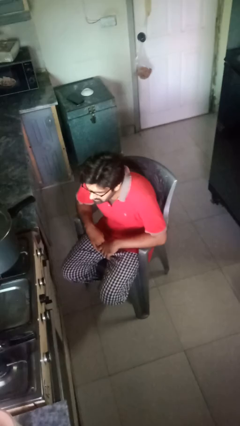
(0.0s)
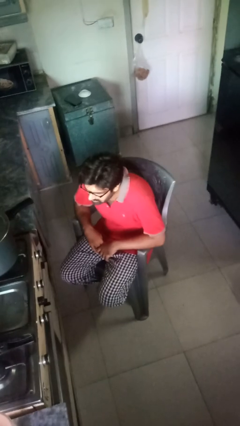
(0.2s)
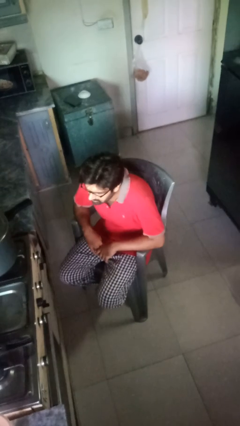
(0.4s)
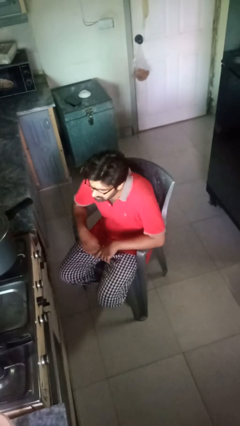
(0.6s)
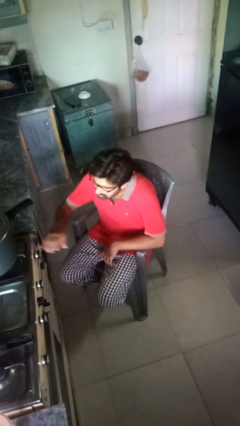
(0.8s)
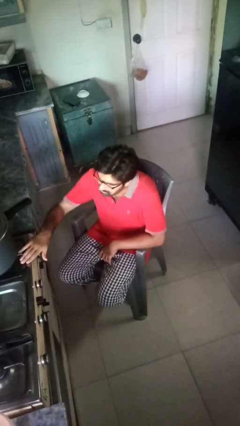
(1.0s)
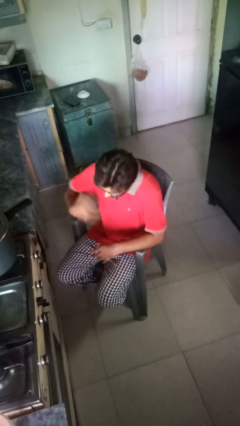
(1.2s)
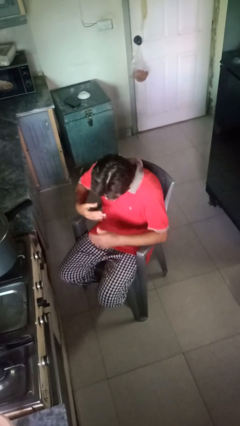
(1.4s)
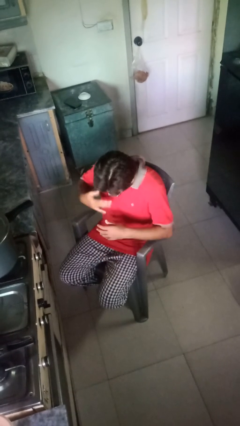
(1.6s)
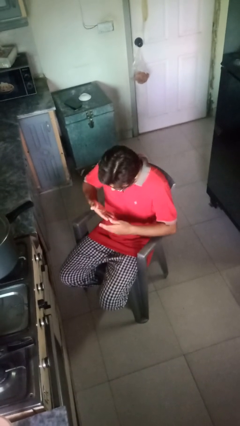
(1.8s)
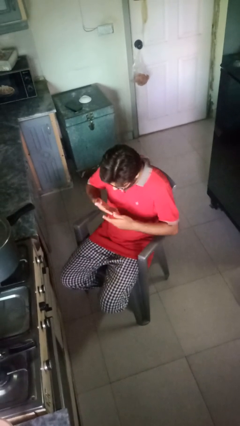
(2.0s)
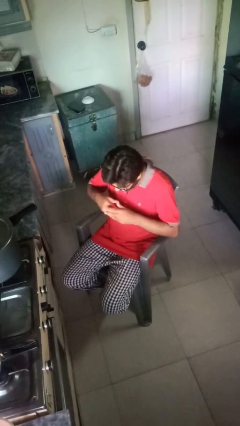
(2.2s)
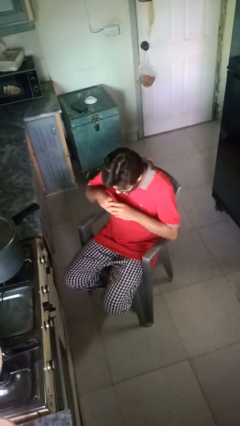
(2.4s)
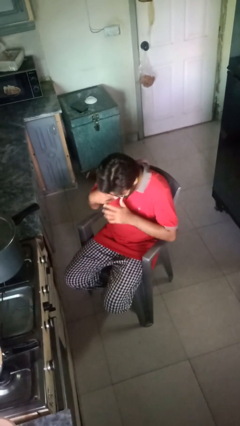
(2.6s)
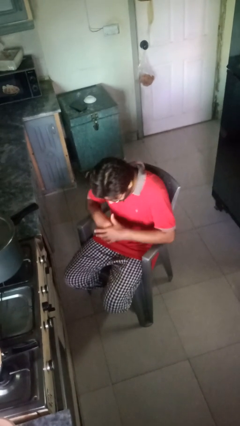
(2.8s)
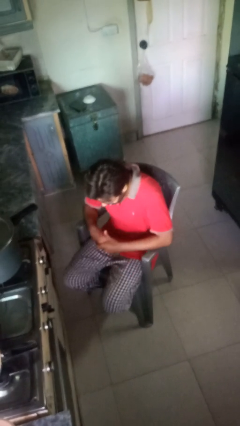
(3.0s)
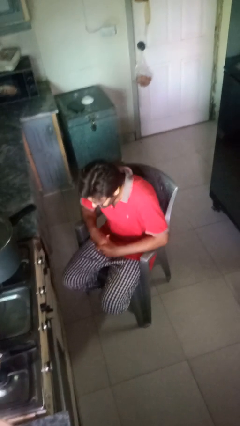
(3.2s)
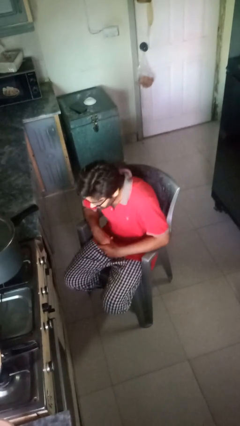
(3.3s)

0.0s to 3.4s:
person burns hand

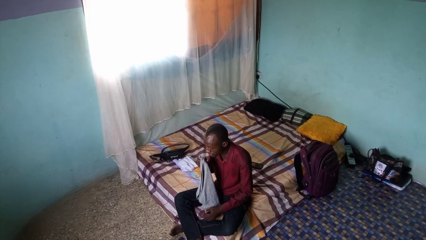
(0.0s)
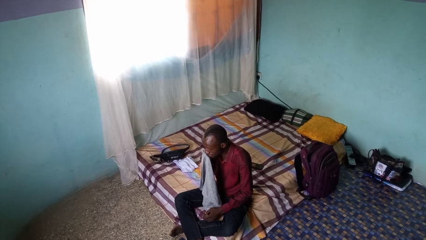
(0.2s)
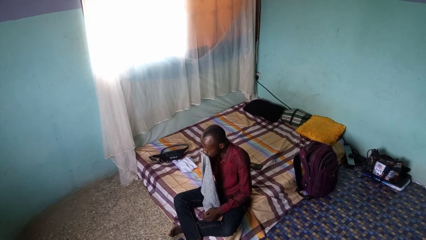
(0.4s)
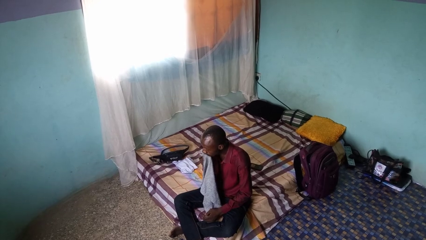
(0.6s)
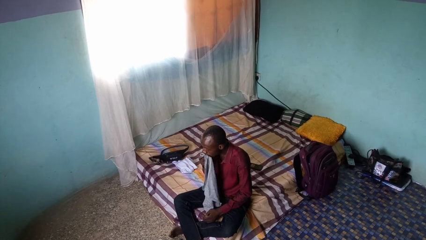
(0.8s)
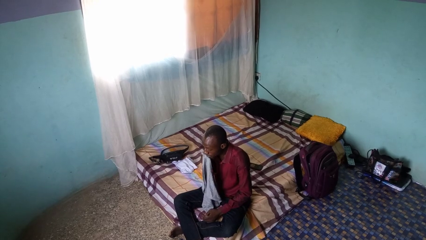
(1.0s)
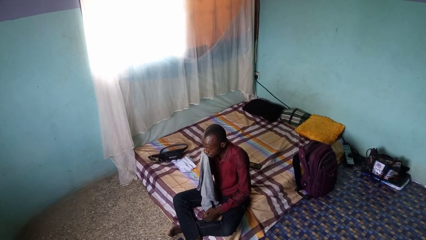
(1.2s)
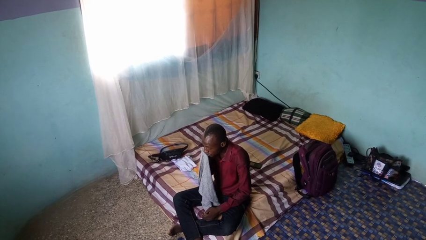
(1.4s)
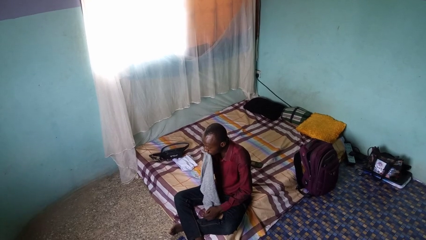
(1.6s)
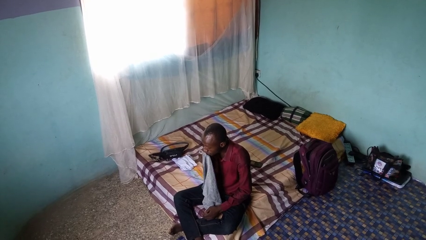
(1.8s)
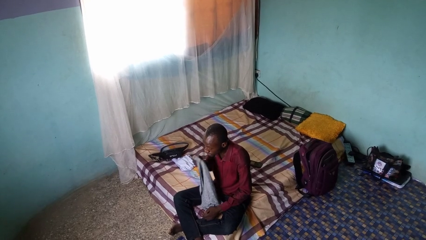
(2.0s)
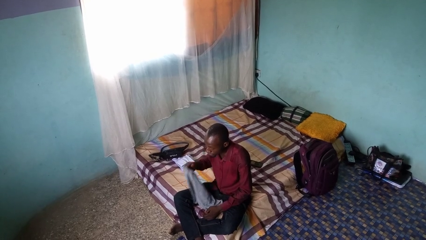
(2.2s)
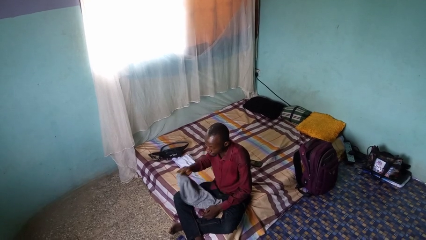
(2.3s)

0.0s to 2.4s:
person wipes mouth with napkin

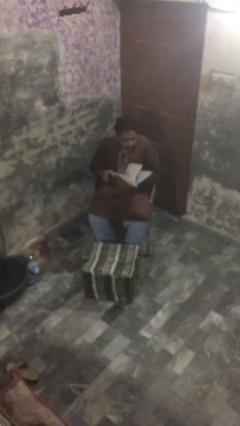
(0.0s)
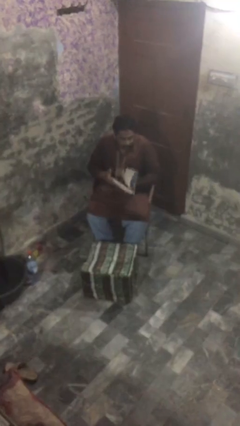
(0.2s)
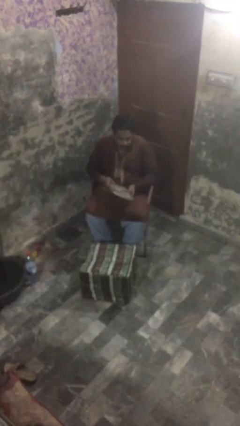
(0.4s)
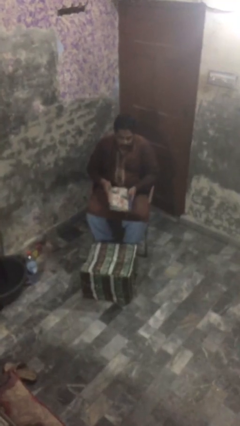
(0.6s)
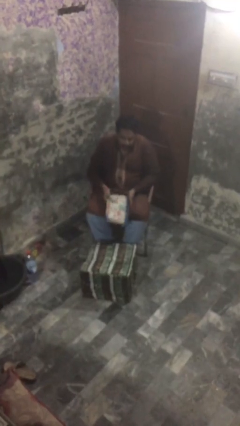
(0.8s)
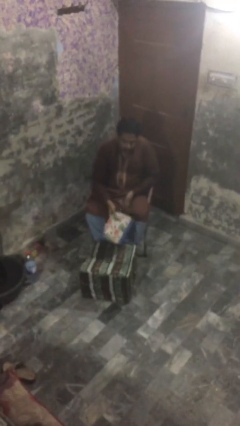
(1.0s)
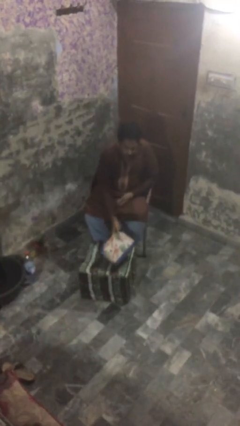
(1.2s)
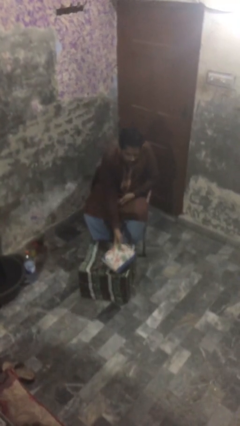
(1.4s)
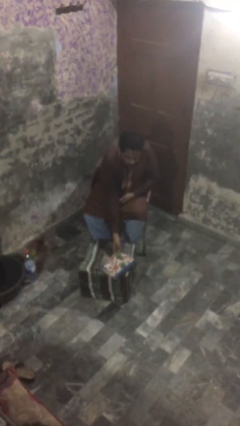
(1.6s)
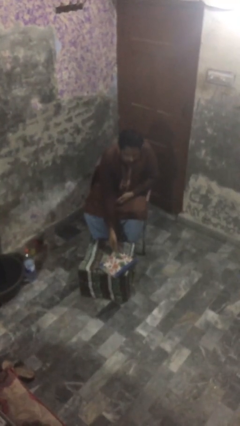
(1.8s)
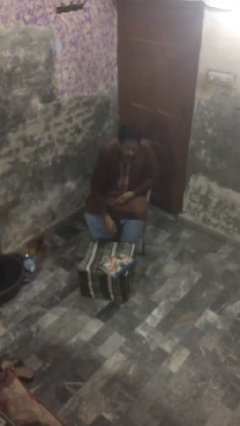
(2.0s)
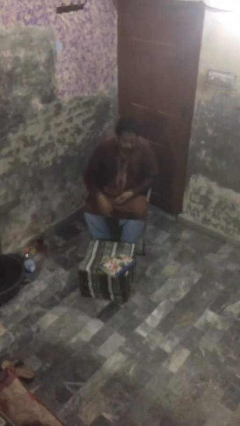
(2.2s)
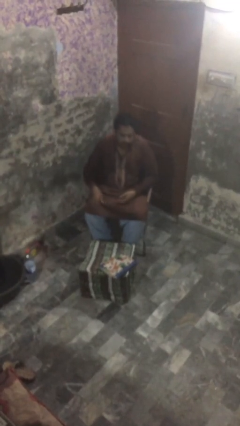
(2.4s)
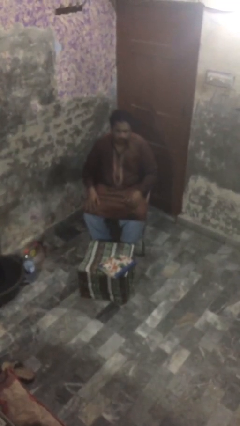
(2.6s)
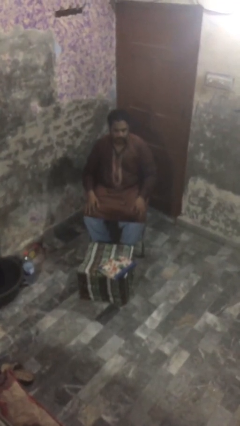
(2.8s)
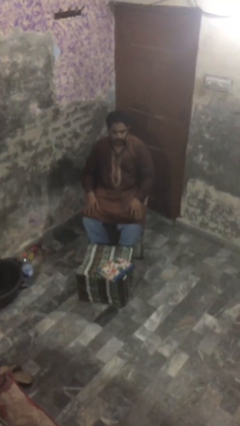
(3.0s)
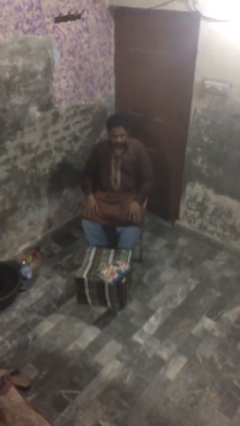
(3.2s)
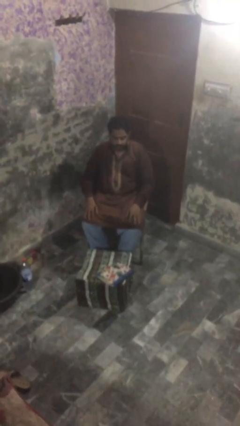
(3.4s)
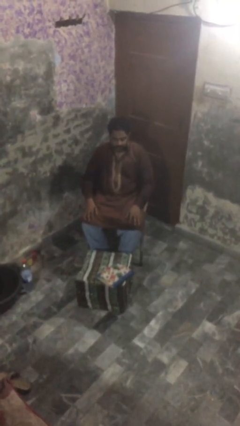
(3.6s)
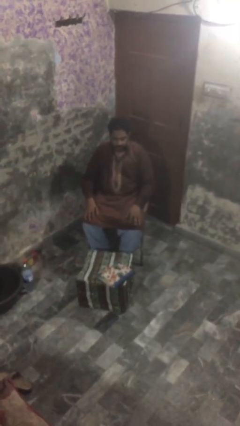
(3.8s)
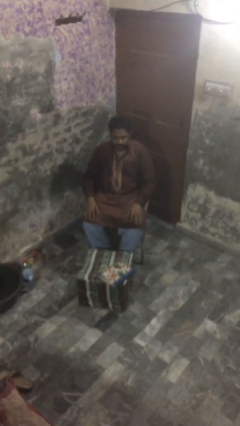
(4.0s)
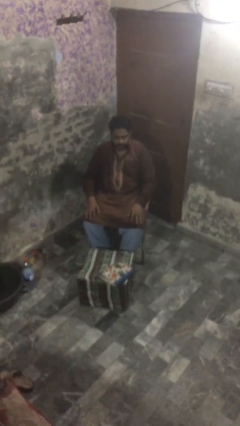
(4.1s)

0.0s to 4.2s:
person puts down object on table

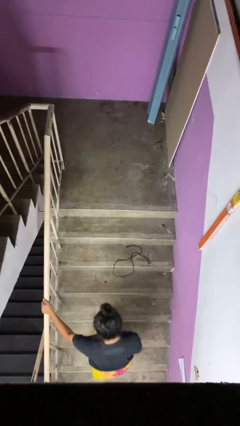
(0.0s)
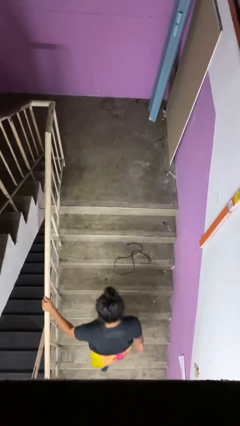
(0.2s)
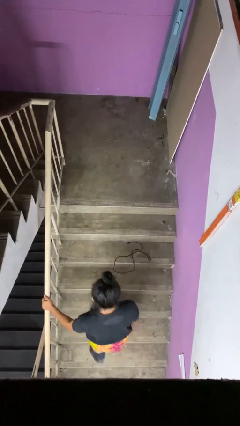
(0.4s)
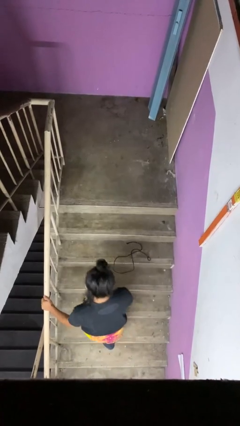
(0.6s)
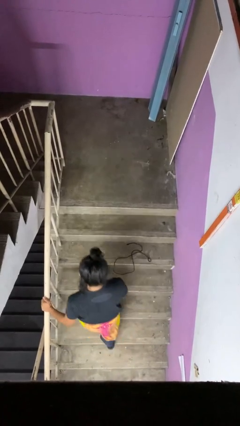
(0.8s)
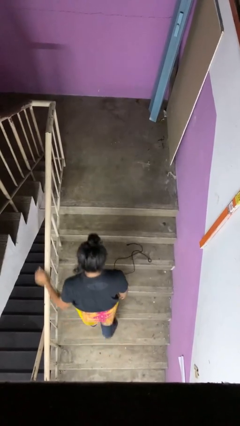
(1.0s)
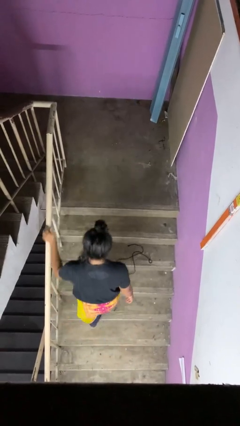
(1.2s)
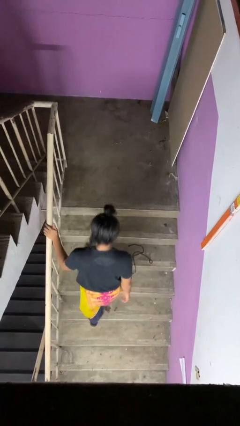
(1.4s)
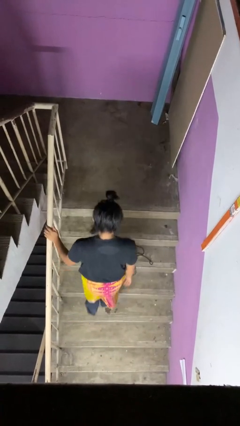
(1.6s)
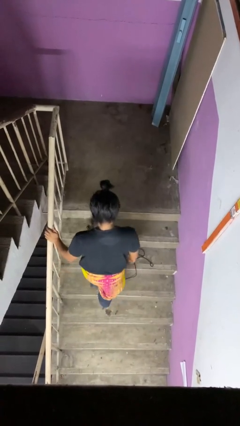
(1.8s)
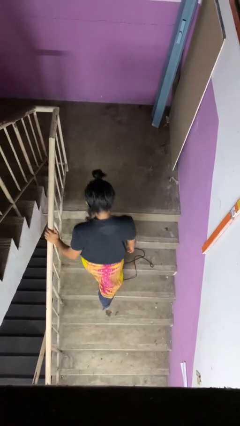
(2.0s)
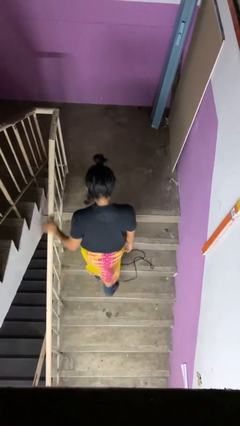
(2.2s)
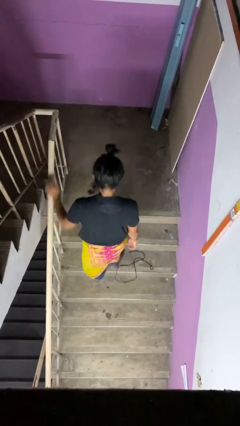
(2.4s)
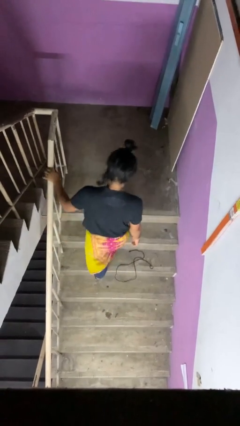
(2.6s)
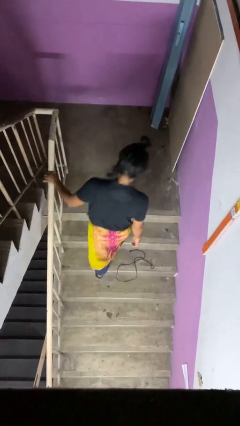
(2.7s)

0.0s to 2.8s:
person climbs up stairs

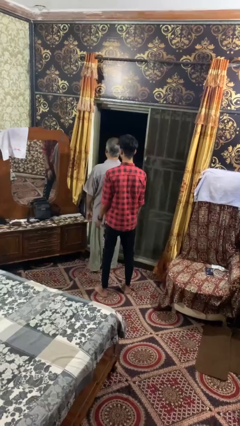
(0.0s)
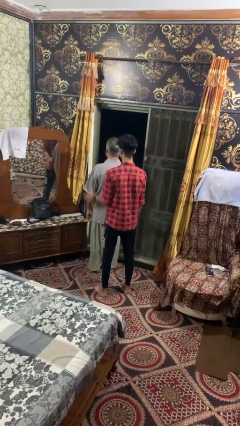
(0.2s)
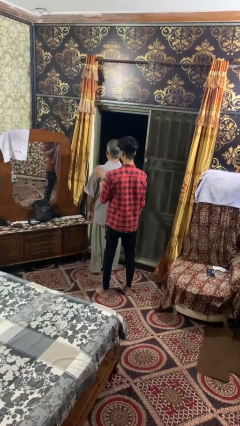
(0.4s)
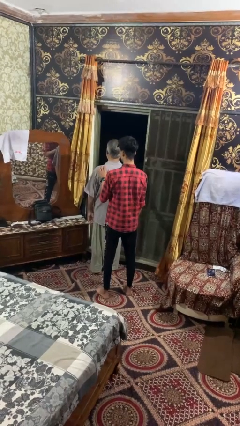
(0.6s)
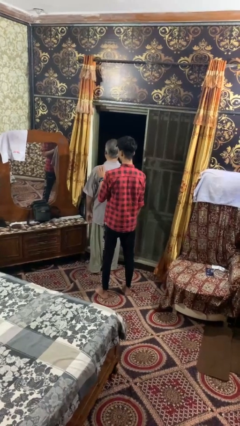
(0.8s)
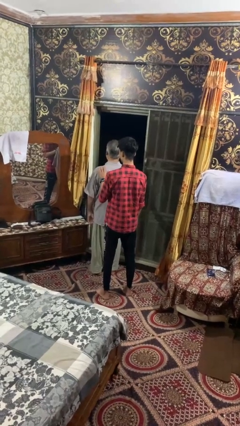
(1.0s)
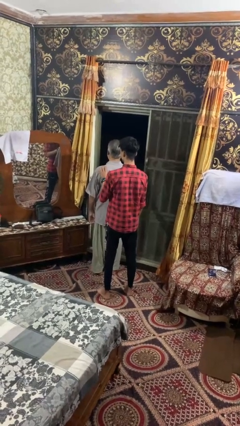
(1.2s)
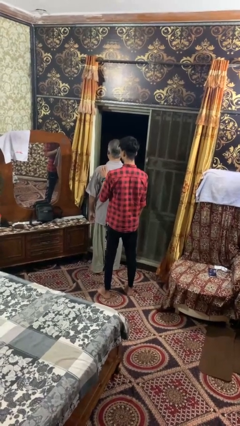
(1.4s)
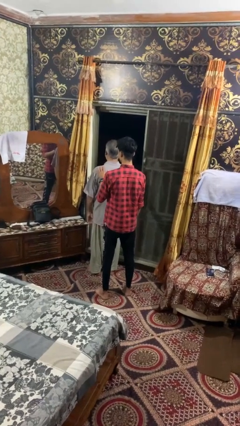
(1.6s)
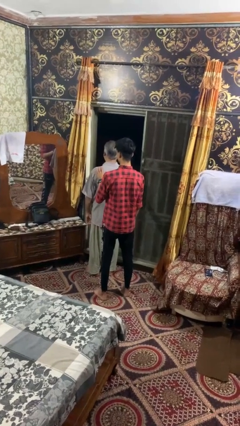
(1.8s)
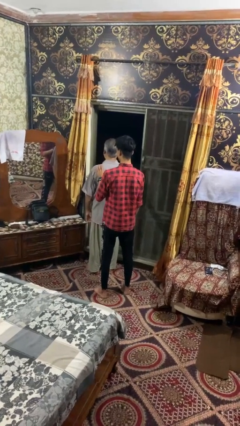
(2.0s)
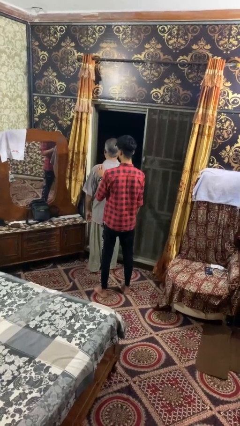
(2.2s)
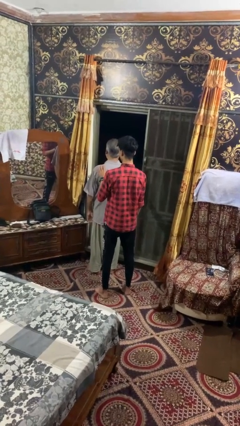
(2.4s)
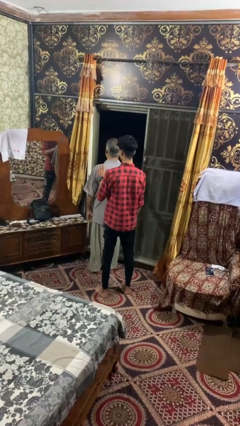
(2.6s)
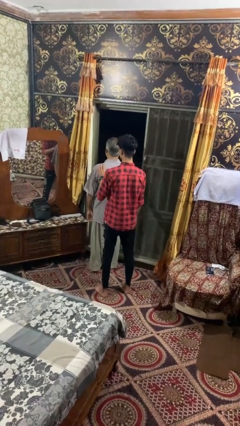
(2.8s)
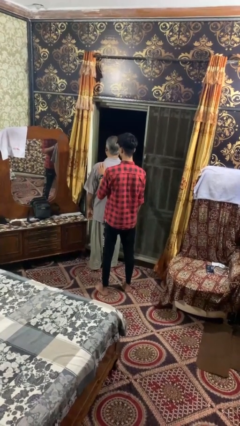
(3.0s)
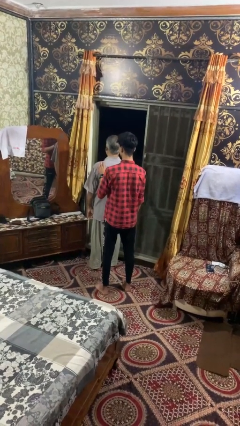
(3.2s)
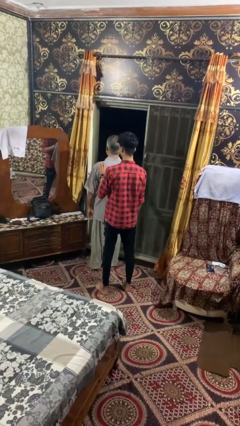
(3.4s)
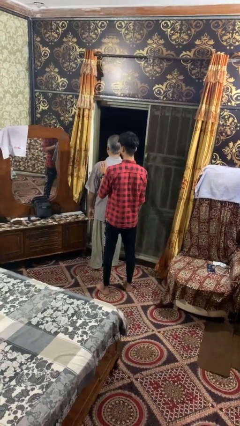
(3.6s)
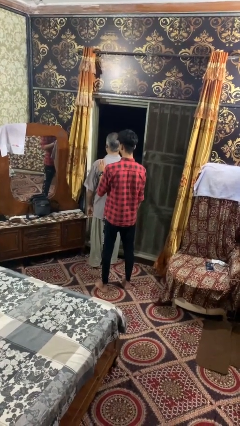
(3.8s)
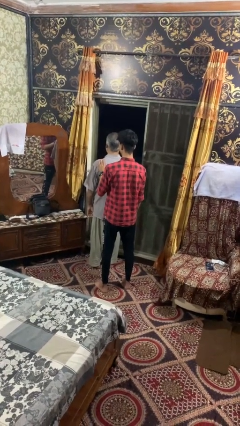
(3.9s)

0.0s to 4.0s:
person touches back of person

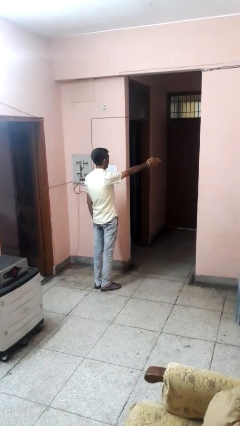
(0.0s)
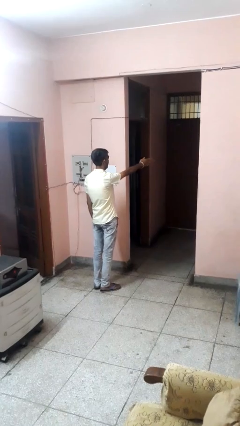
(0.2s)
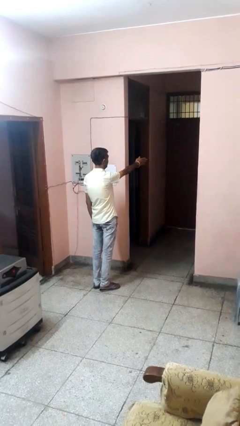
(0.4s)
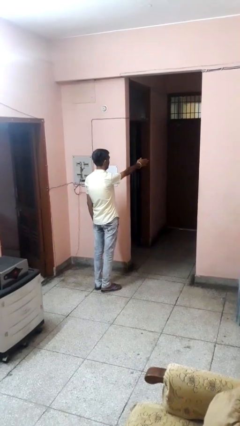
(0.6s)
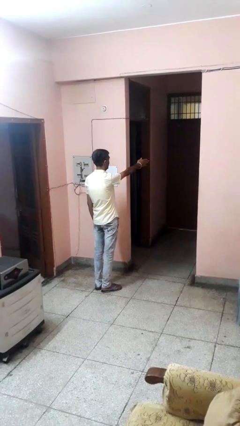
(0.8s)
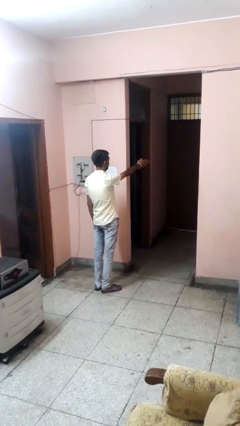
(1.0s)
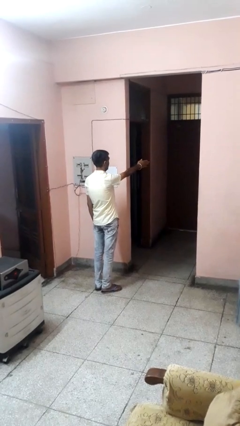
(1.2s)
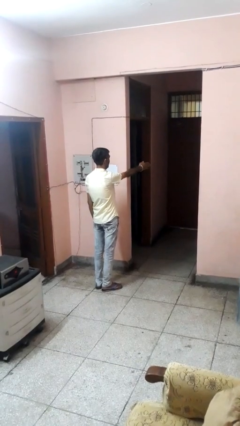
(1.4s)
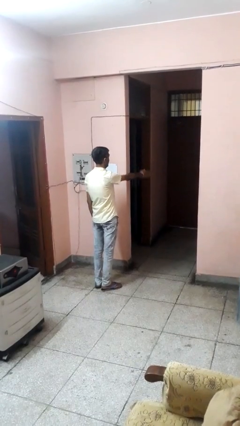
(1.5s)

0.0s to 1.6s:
person gestures swipe right
